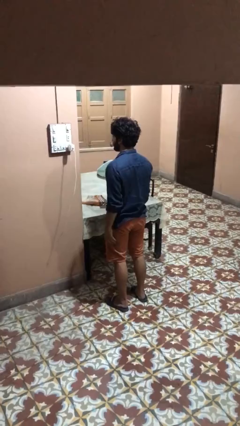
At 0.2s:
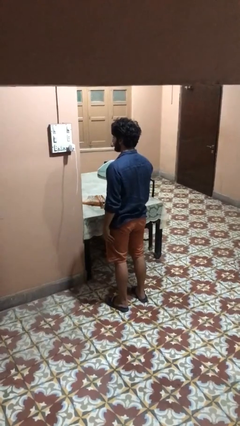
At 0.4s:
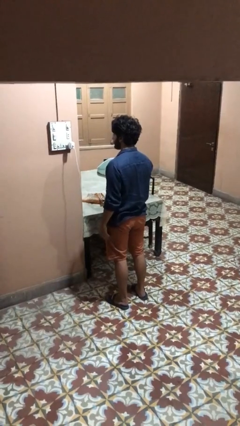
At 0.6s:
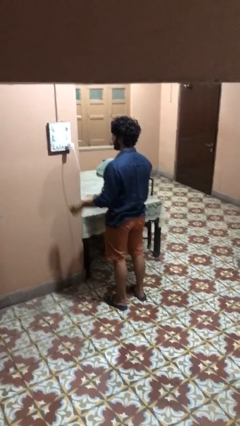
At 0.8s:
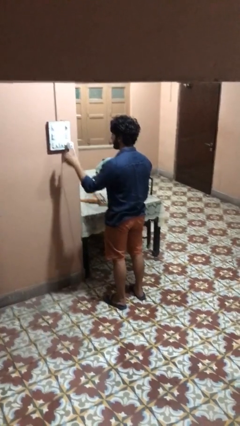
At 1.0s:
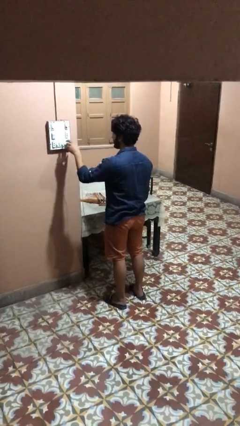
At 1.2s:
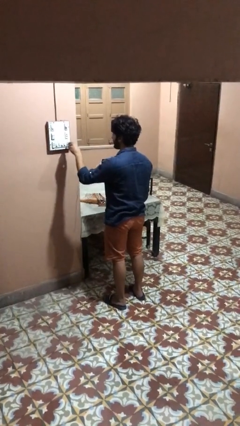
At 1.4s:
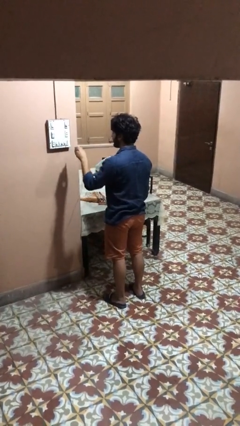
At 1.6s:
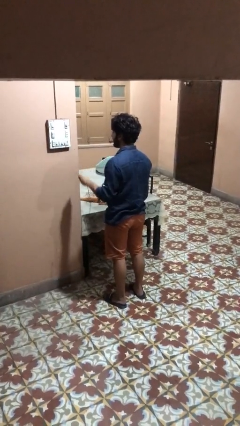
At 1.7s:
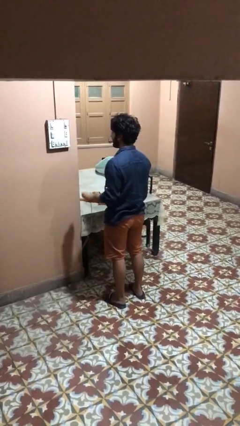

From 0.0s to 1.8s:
person unplugs from electrical socket

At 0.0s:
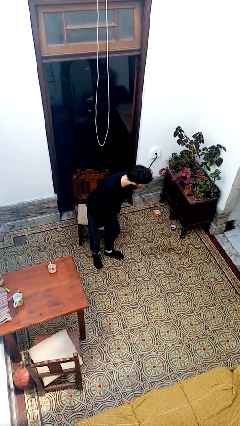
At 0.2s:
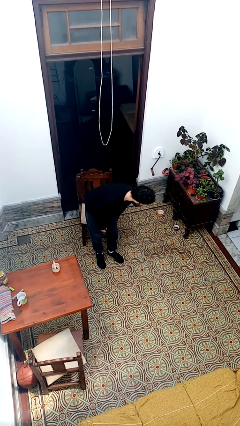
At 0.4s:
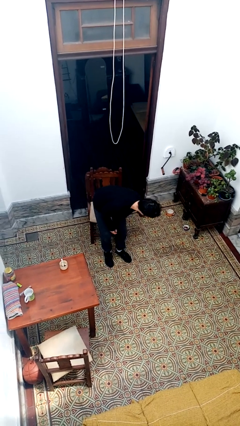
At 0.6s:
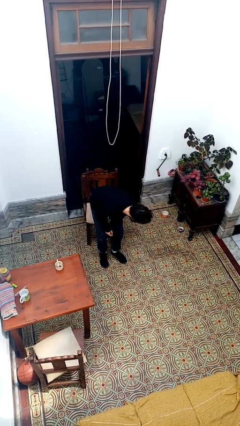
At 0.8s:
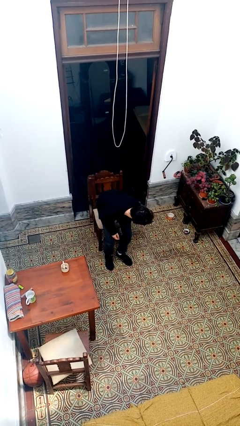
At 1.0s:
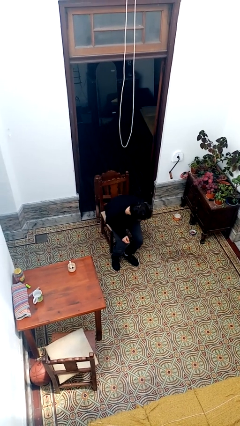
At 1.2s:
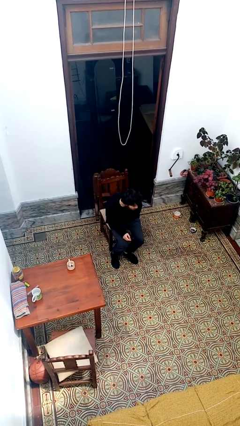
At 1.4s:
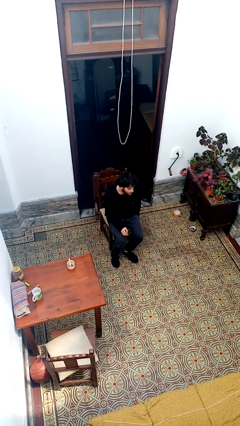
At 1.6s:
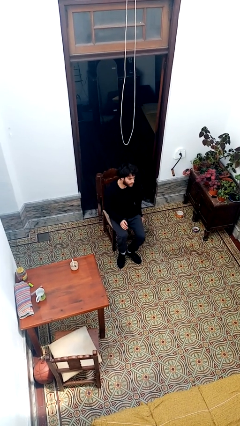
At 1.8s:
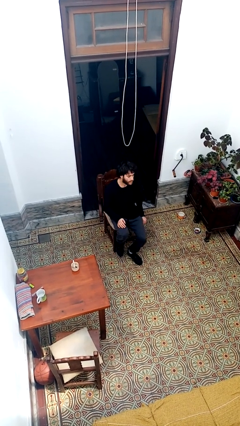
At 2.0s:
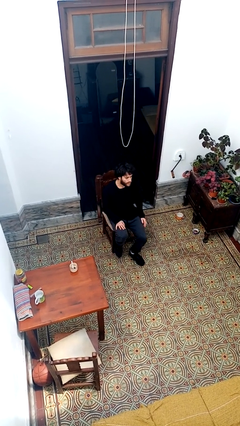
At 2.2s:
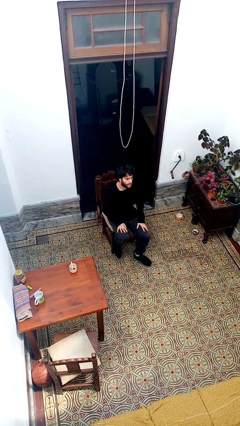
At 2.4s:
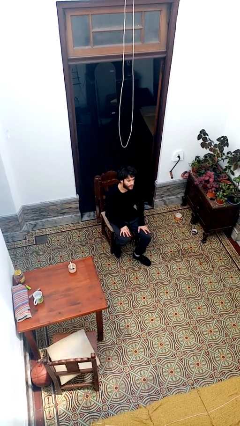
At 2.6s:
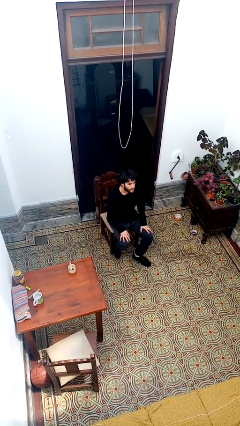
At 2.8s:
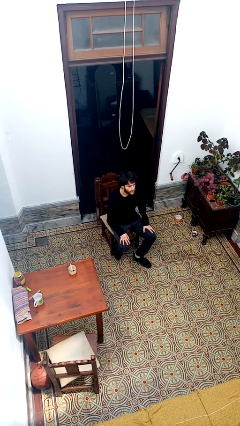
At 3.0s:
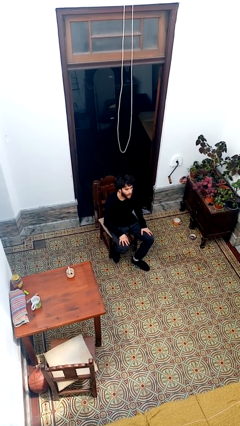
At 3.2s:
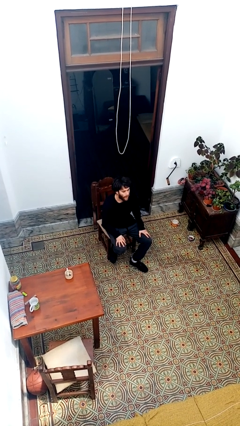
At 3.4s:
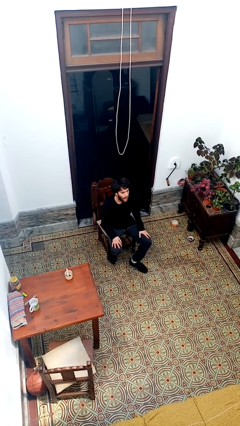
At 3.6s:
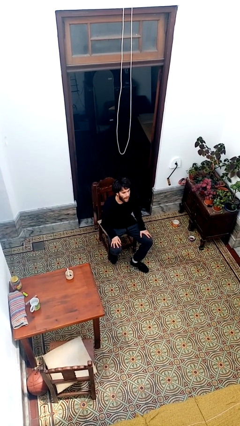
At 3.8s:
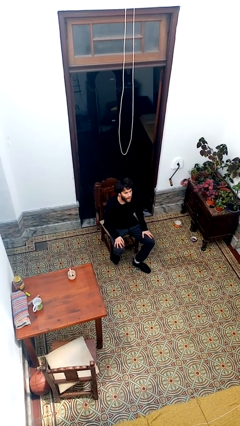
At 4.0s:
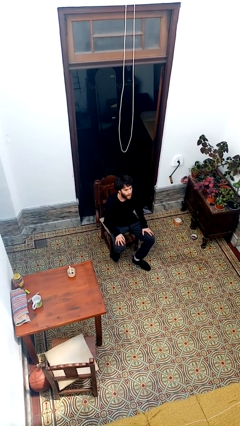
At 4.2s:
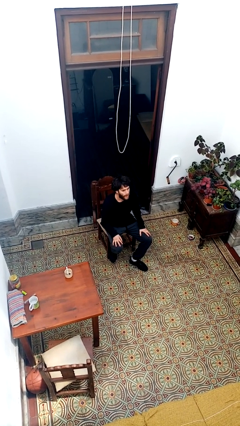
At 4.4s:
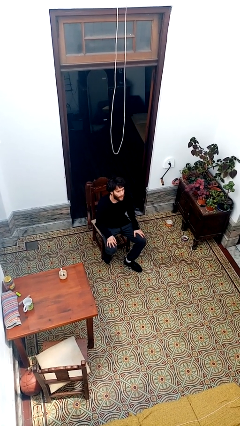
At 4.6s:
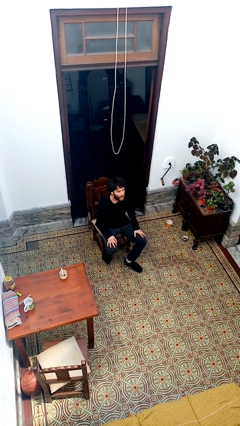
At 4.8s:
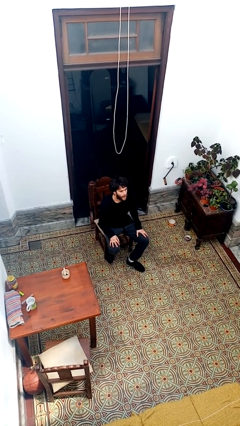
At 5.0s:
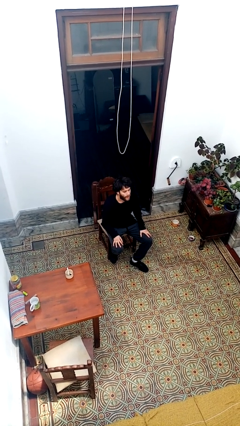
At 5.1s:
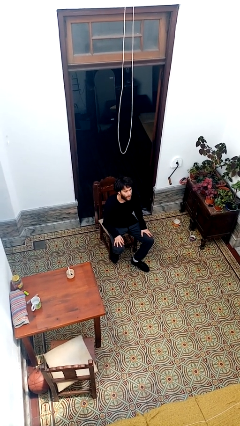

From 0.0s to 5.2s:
person sits down

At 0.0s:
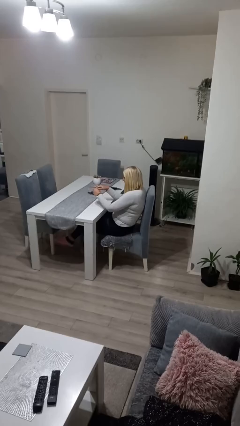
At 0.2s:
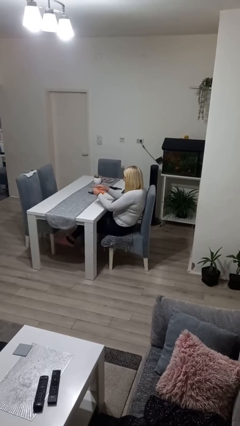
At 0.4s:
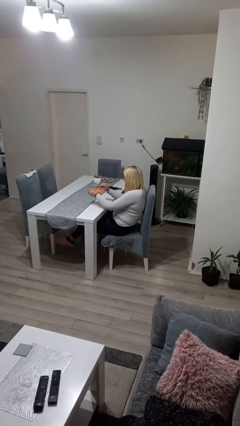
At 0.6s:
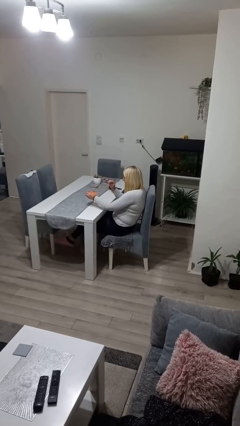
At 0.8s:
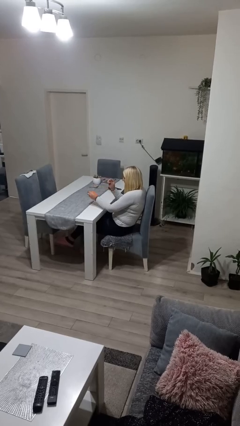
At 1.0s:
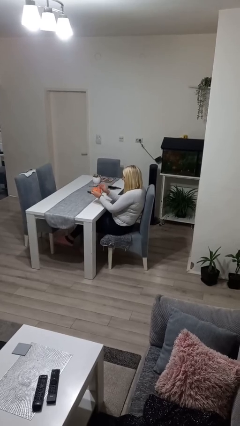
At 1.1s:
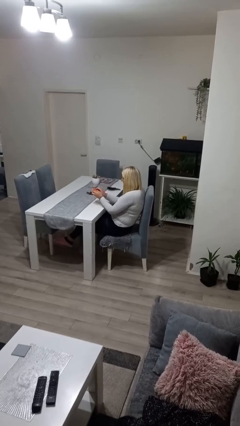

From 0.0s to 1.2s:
person tears paper

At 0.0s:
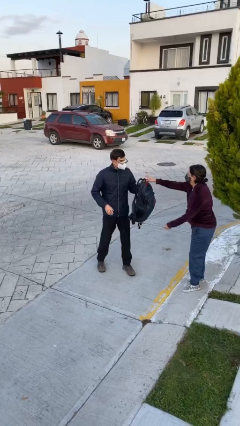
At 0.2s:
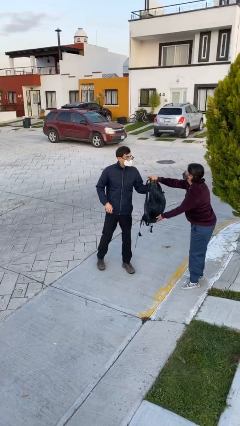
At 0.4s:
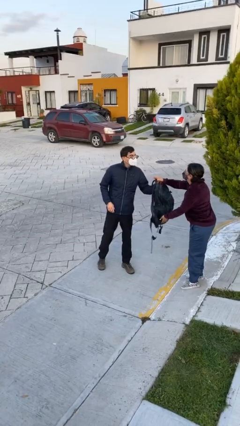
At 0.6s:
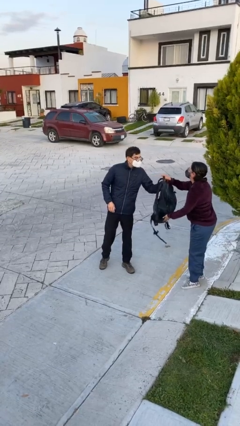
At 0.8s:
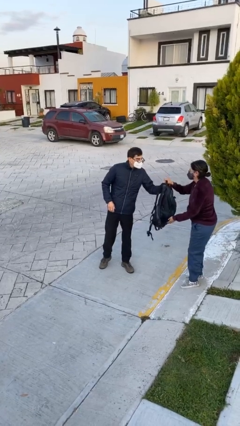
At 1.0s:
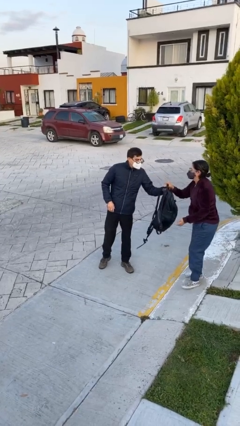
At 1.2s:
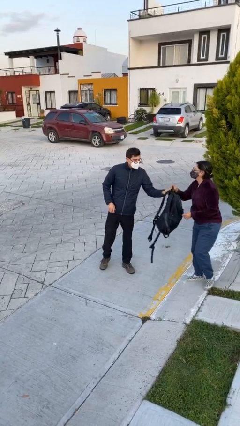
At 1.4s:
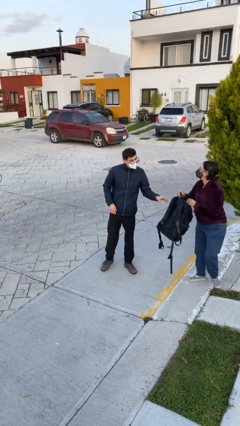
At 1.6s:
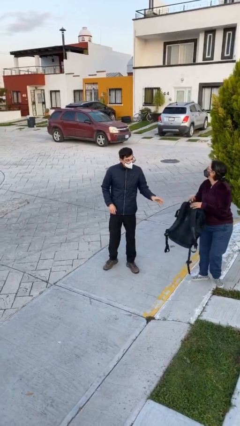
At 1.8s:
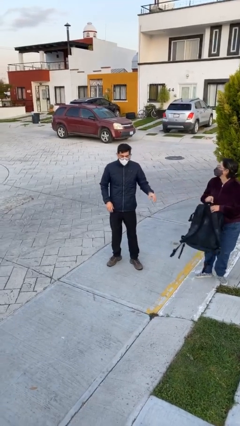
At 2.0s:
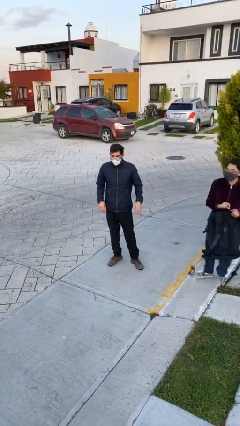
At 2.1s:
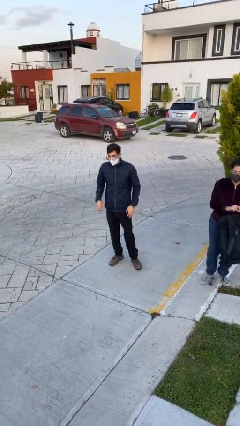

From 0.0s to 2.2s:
person transfers object to person

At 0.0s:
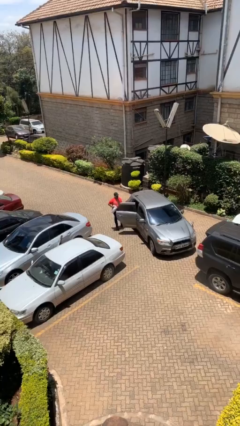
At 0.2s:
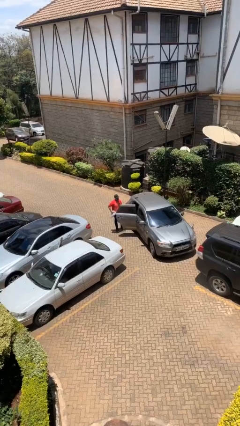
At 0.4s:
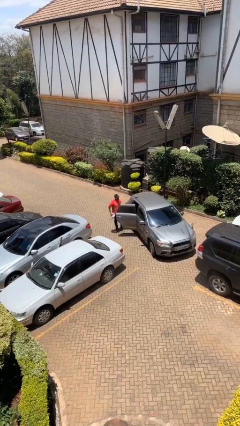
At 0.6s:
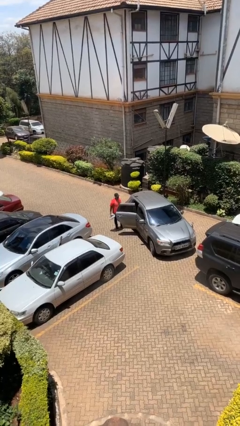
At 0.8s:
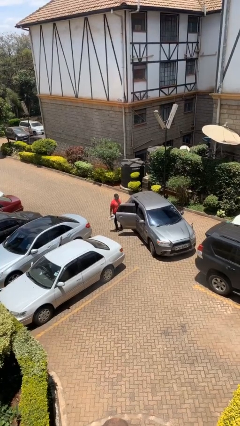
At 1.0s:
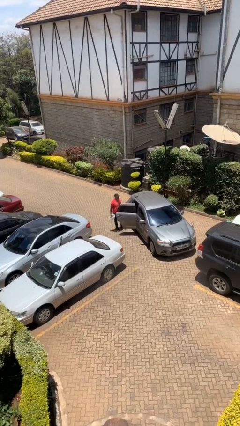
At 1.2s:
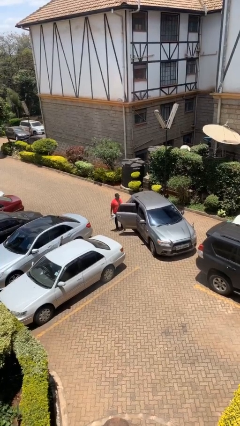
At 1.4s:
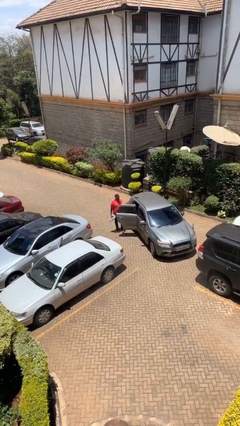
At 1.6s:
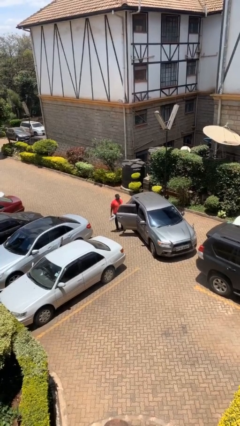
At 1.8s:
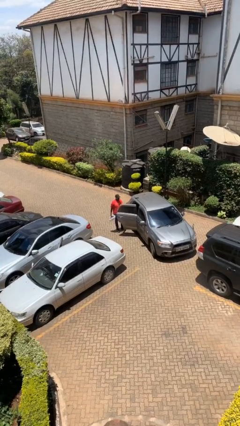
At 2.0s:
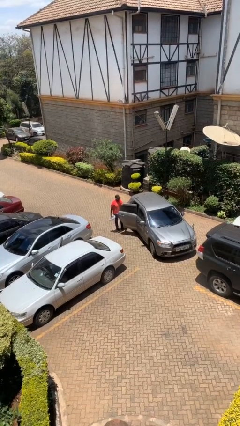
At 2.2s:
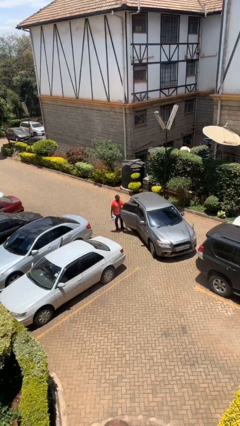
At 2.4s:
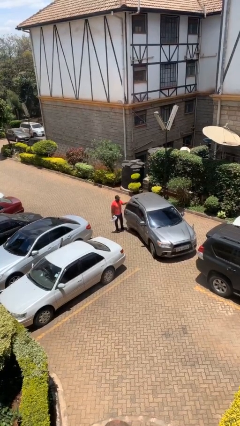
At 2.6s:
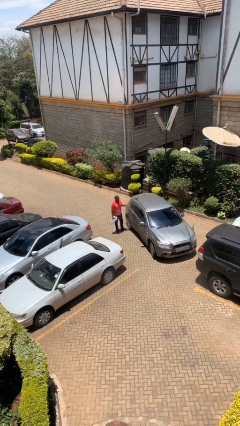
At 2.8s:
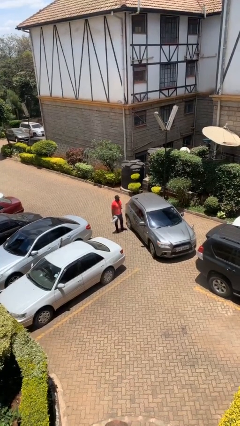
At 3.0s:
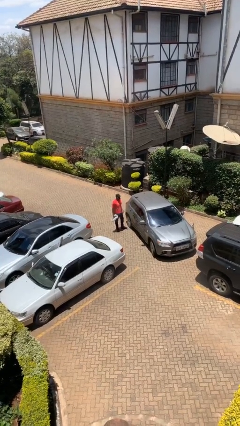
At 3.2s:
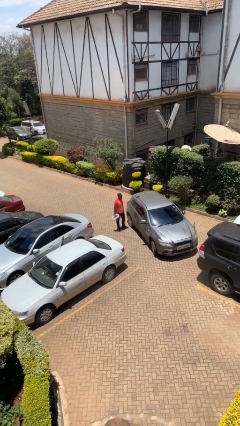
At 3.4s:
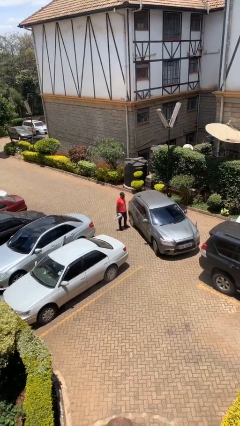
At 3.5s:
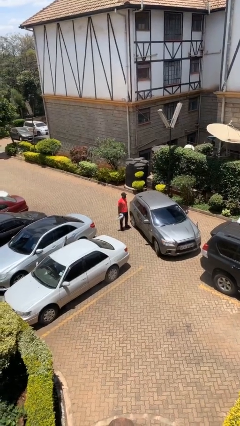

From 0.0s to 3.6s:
person closes car door

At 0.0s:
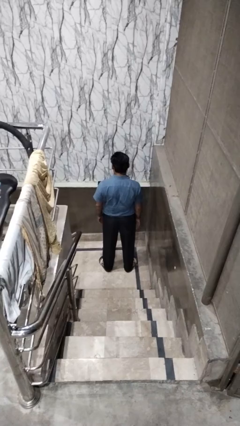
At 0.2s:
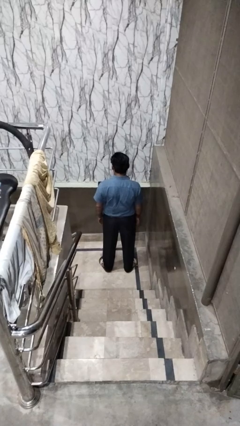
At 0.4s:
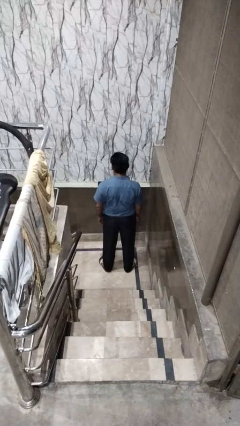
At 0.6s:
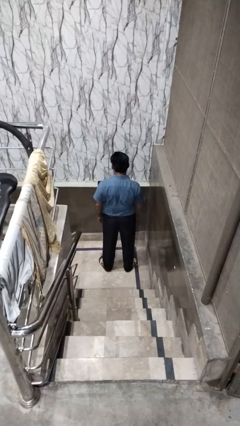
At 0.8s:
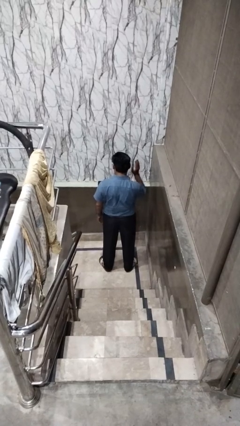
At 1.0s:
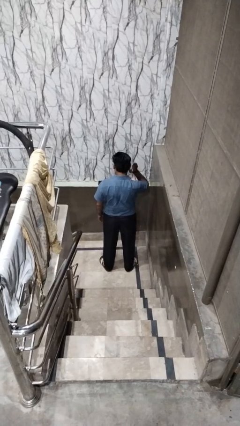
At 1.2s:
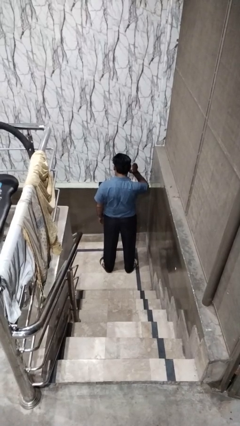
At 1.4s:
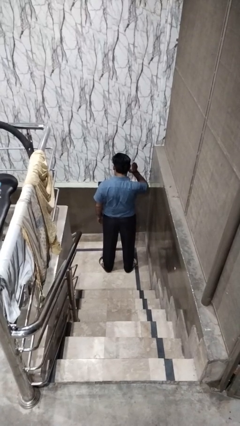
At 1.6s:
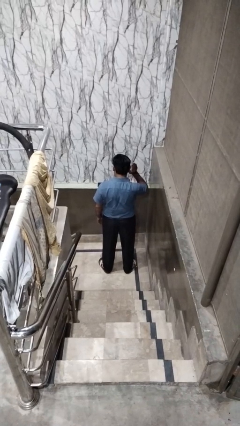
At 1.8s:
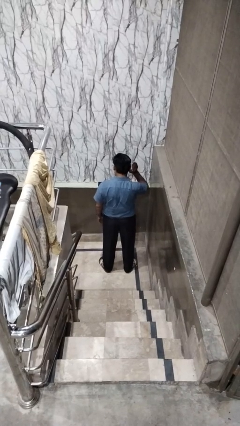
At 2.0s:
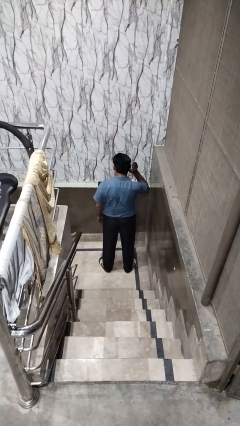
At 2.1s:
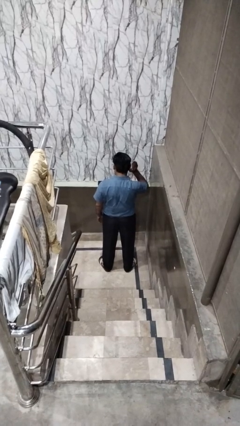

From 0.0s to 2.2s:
person gestures listen closely

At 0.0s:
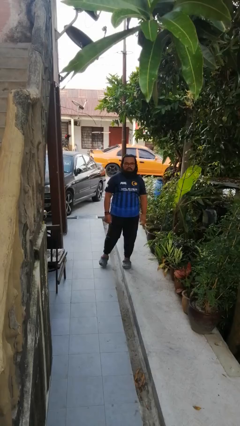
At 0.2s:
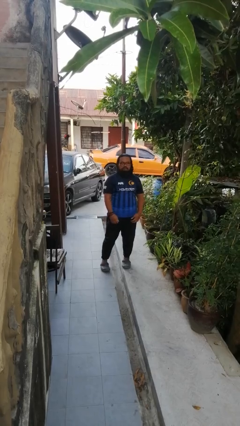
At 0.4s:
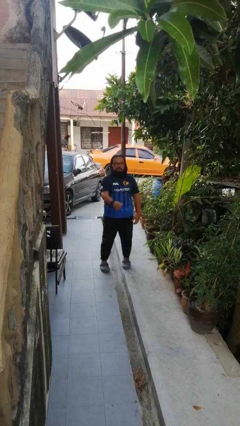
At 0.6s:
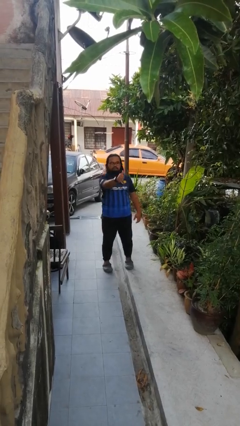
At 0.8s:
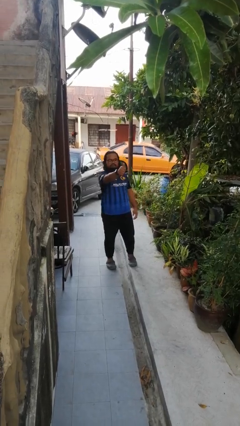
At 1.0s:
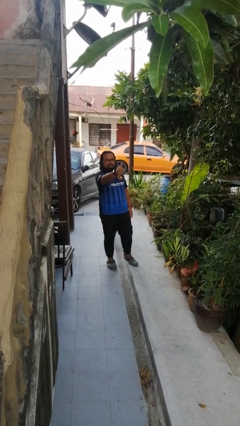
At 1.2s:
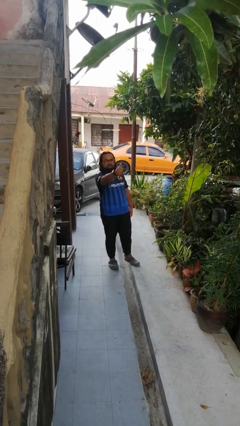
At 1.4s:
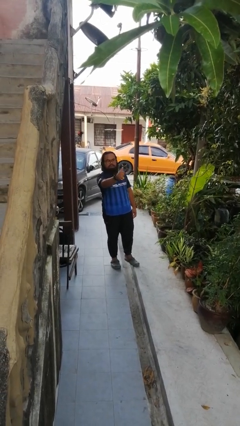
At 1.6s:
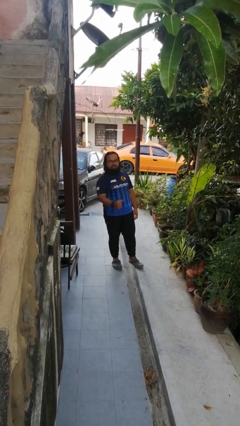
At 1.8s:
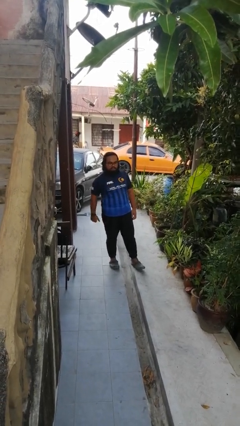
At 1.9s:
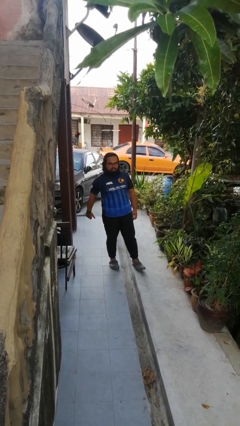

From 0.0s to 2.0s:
person gestures thumbs up
